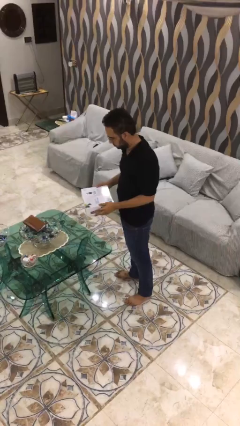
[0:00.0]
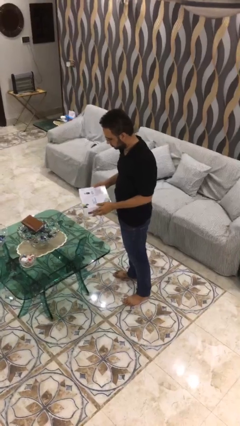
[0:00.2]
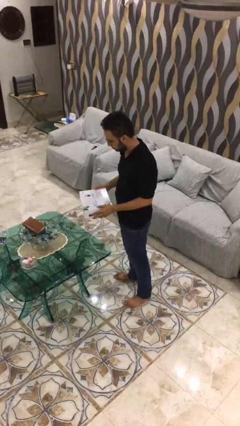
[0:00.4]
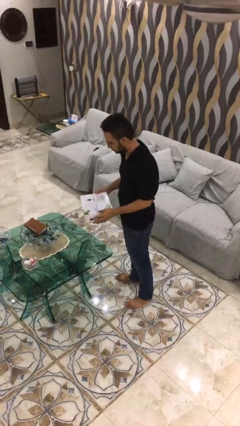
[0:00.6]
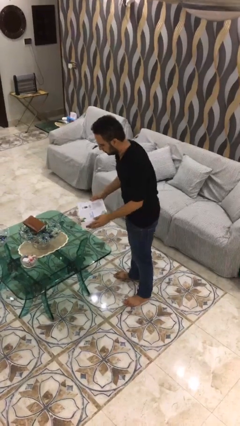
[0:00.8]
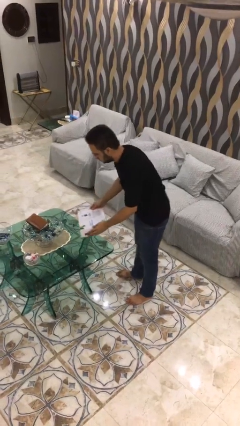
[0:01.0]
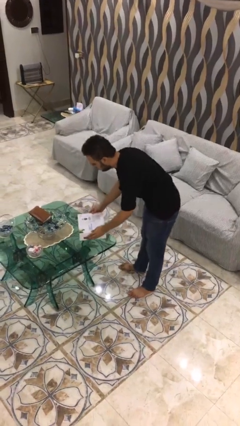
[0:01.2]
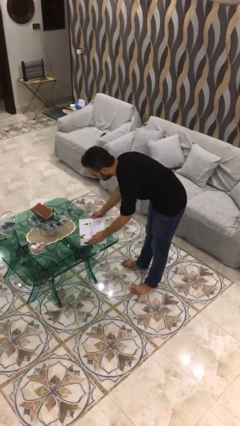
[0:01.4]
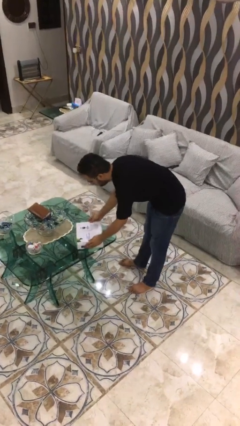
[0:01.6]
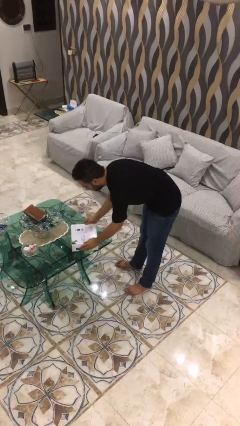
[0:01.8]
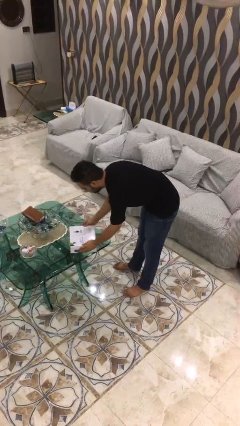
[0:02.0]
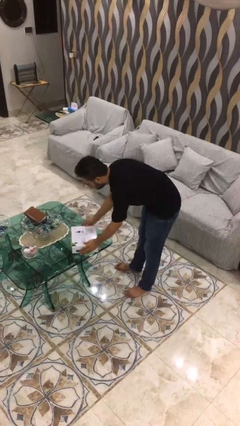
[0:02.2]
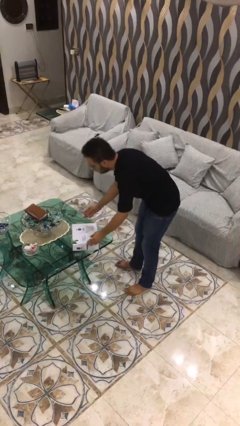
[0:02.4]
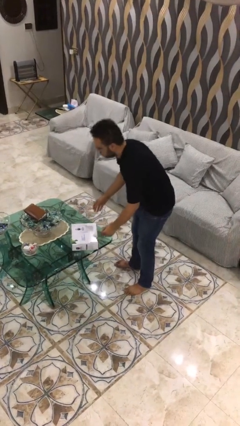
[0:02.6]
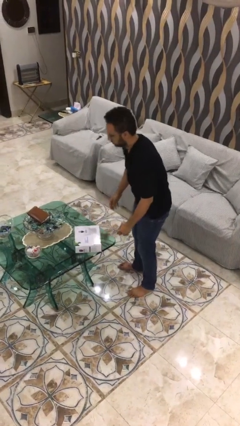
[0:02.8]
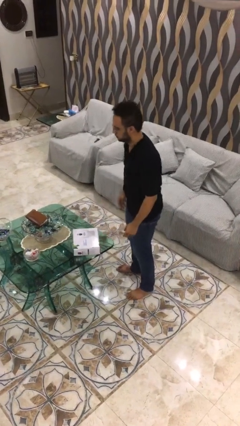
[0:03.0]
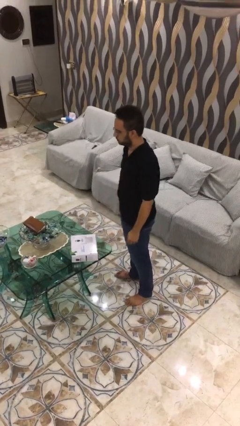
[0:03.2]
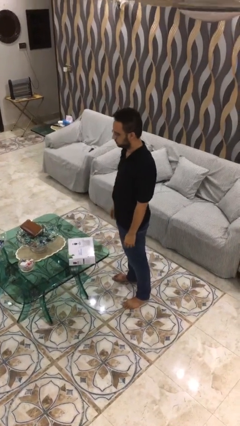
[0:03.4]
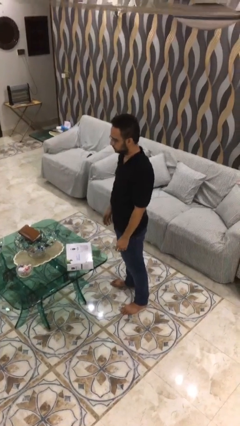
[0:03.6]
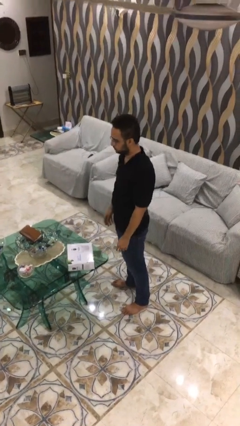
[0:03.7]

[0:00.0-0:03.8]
person puts down object on table

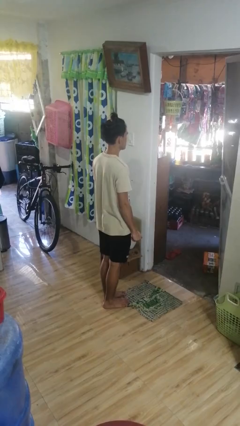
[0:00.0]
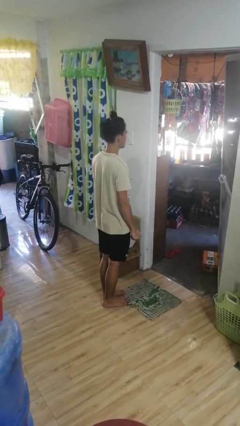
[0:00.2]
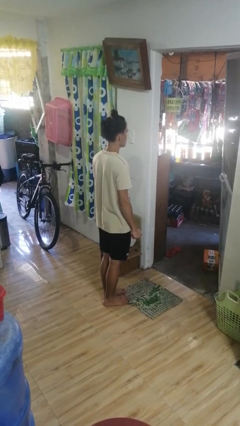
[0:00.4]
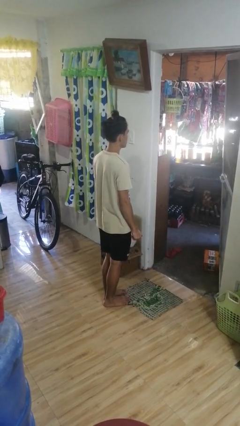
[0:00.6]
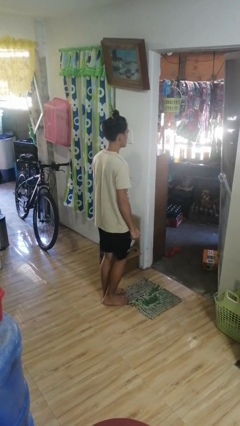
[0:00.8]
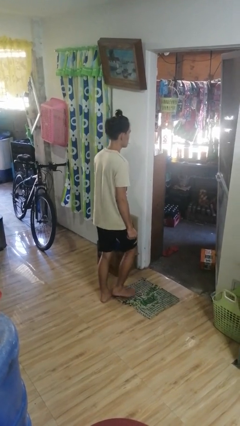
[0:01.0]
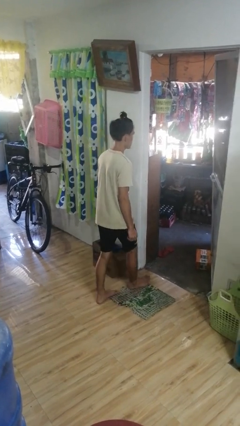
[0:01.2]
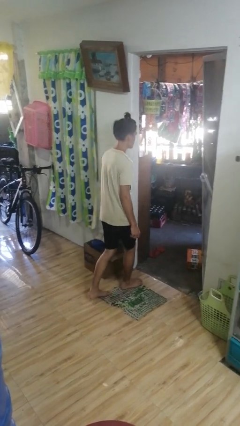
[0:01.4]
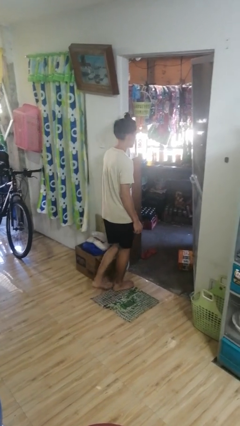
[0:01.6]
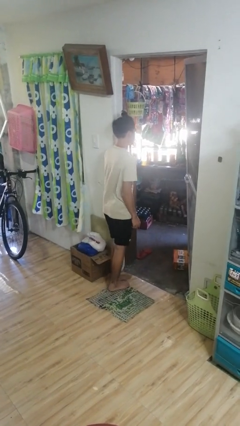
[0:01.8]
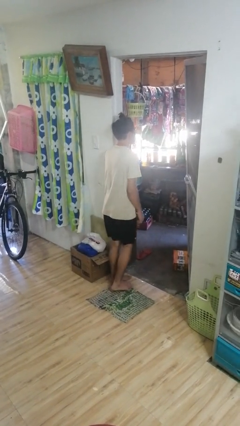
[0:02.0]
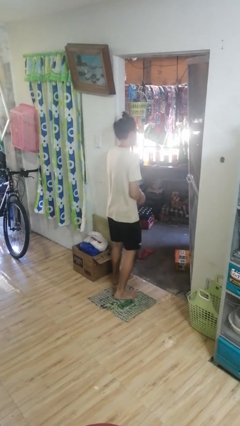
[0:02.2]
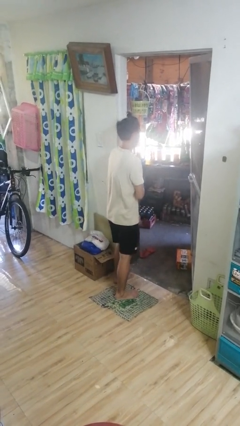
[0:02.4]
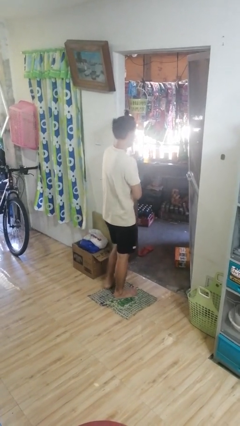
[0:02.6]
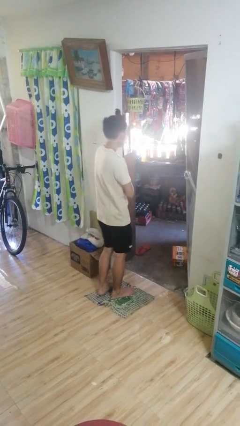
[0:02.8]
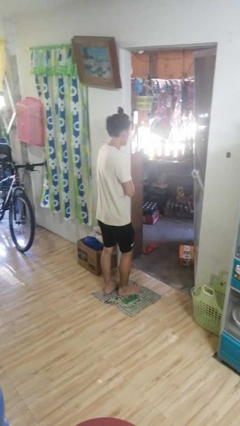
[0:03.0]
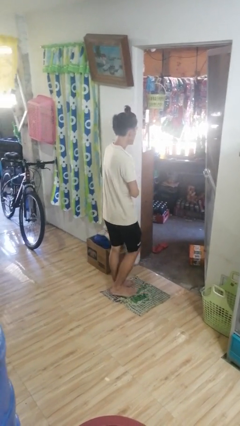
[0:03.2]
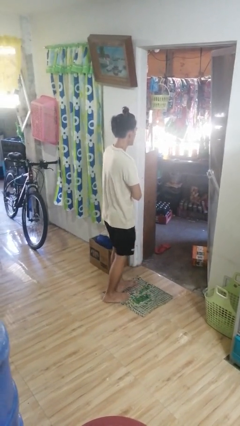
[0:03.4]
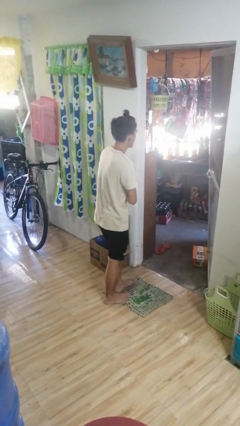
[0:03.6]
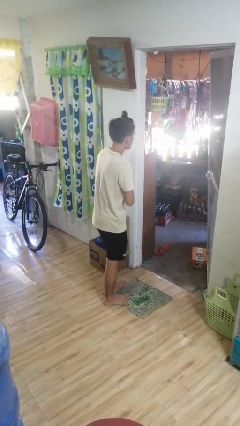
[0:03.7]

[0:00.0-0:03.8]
person bumps into wall

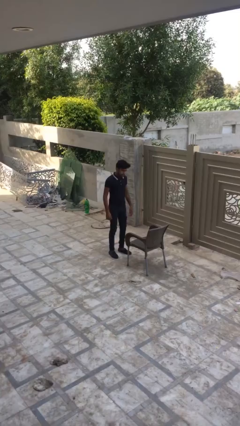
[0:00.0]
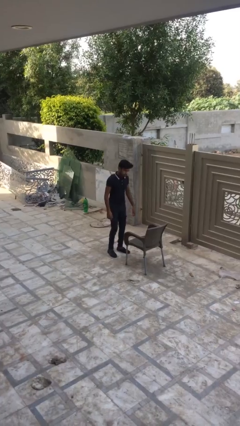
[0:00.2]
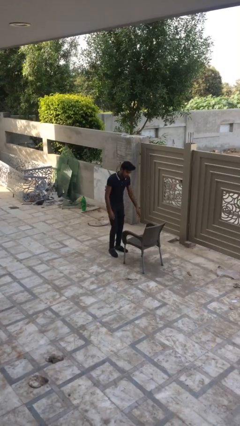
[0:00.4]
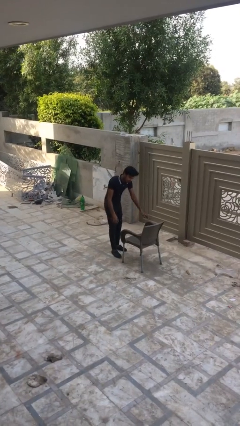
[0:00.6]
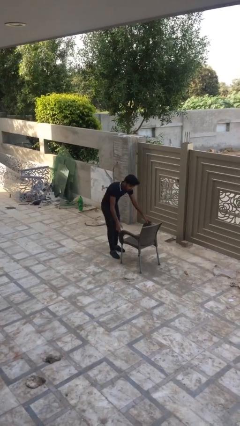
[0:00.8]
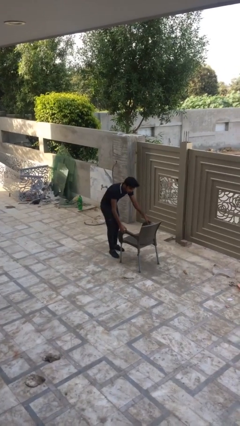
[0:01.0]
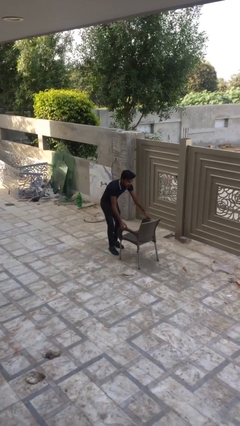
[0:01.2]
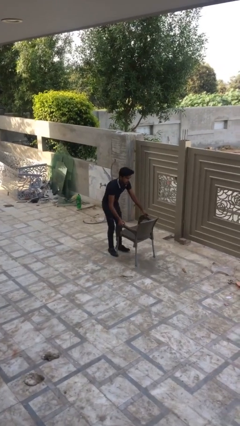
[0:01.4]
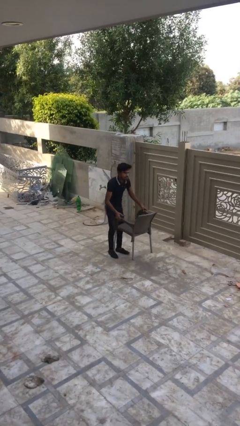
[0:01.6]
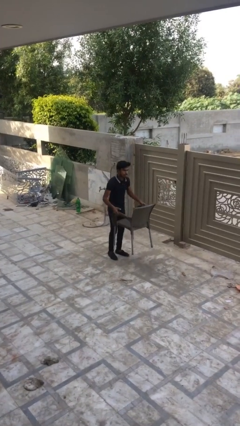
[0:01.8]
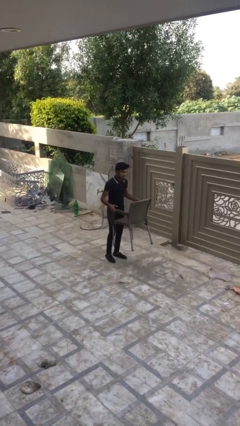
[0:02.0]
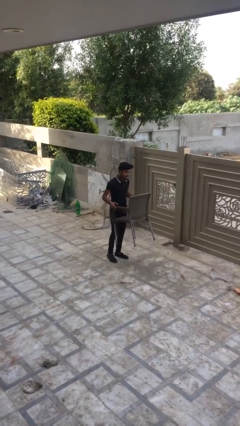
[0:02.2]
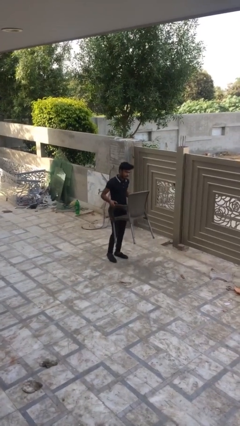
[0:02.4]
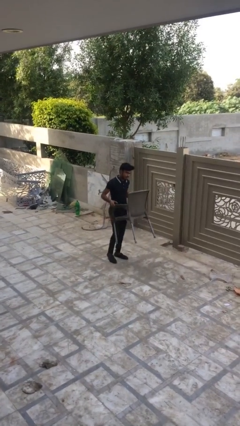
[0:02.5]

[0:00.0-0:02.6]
person picks up object from floor

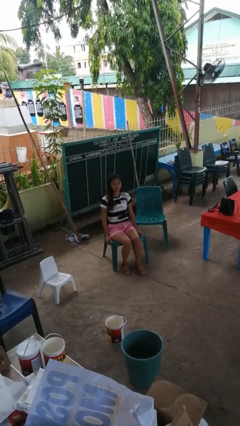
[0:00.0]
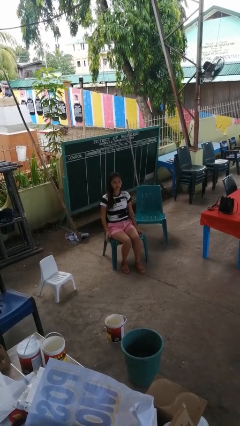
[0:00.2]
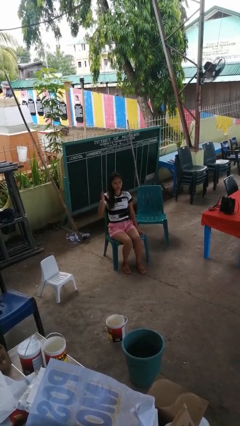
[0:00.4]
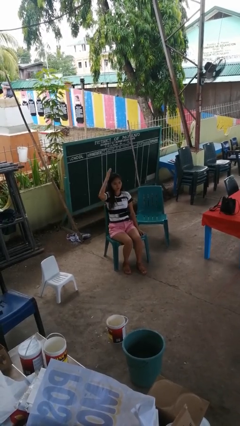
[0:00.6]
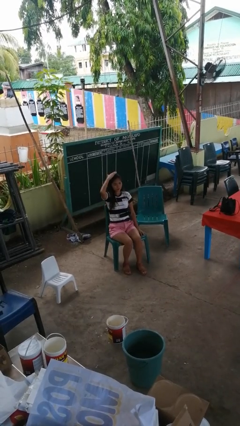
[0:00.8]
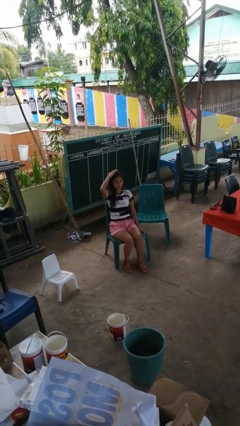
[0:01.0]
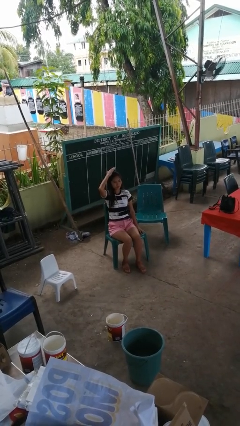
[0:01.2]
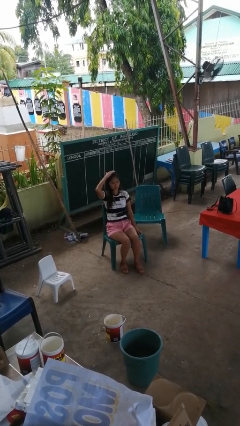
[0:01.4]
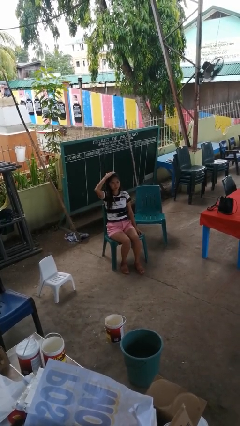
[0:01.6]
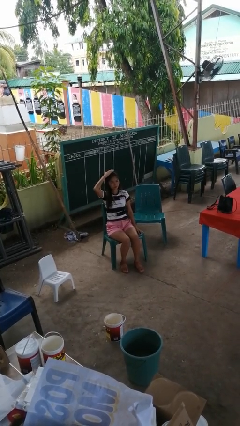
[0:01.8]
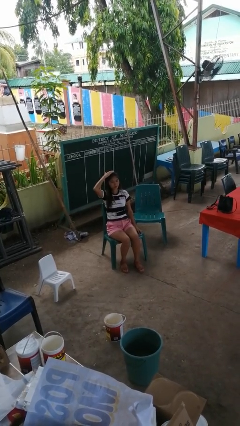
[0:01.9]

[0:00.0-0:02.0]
person pats head

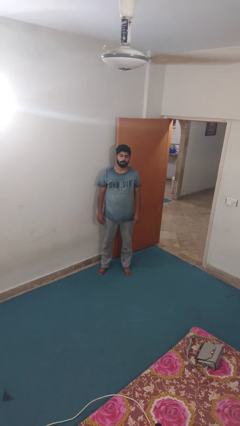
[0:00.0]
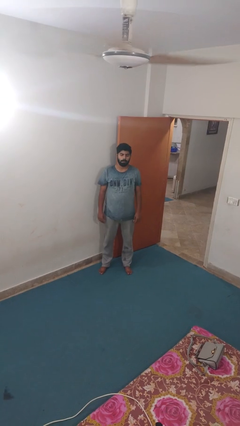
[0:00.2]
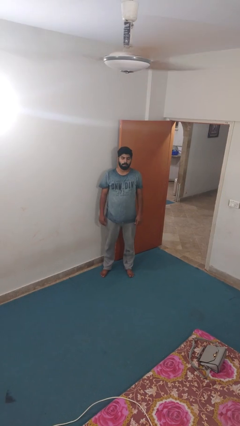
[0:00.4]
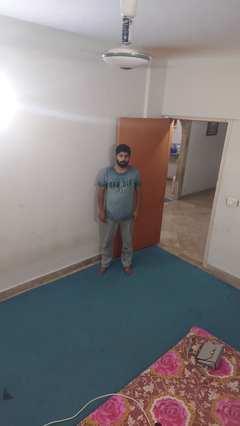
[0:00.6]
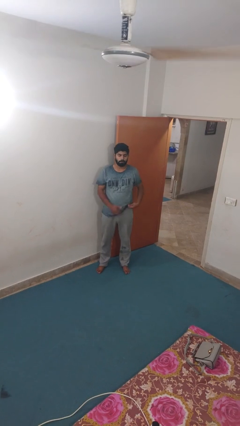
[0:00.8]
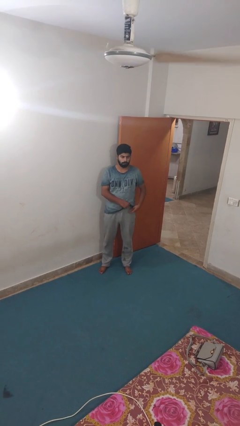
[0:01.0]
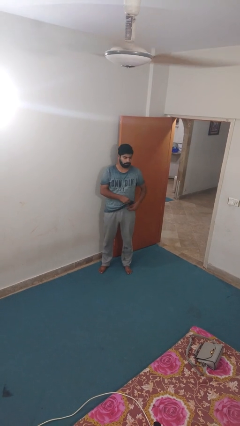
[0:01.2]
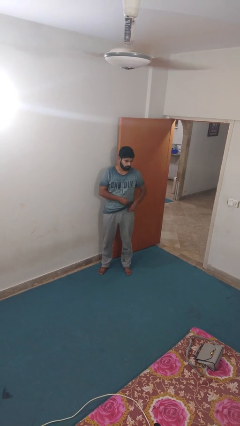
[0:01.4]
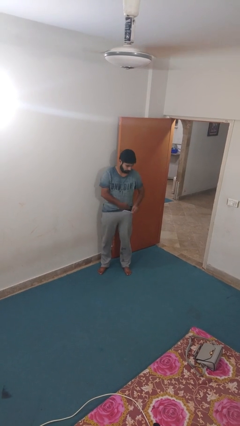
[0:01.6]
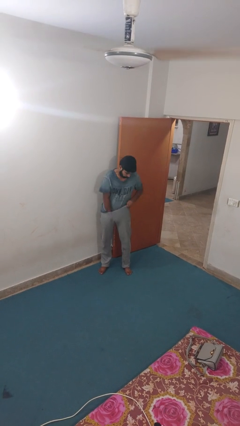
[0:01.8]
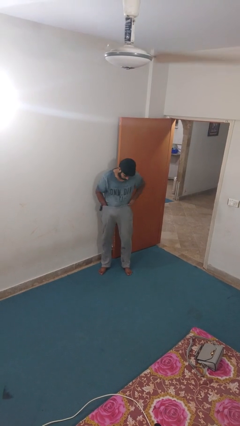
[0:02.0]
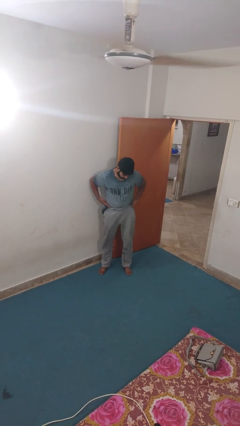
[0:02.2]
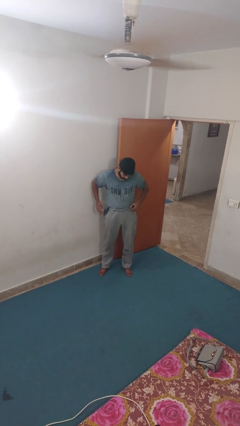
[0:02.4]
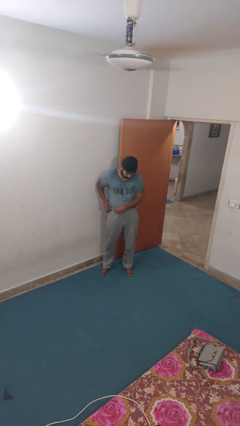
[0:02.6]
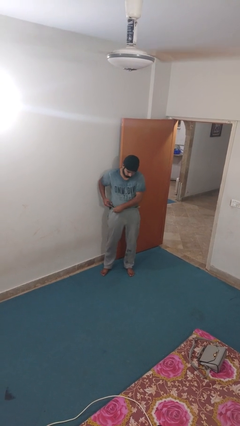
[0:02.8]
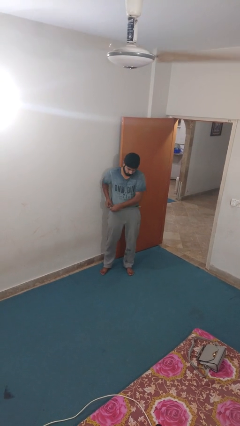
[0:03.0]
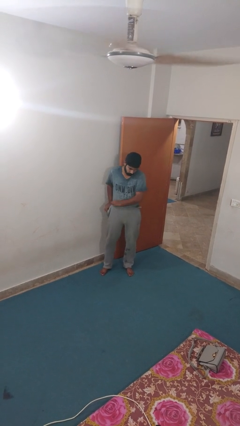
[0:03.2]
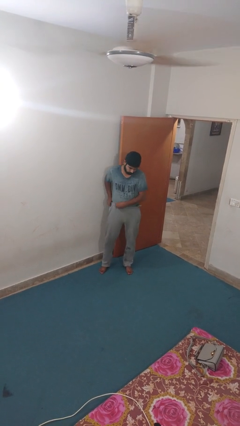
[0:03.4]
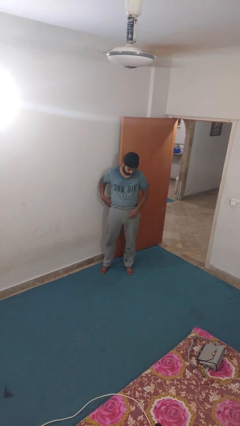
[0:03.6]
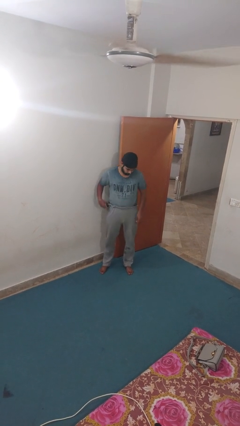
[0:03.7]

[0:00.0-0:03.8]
person tucks in shirt

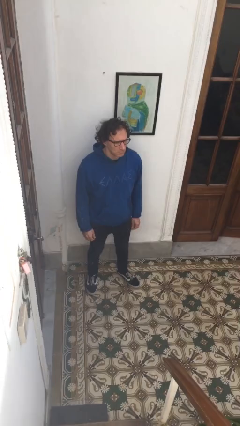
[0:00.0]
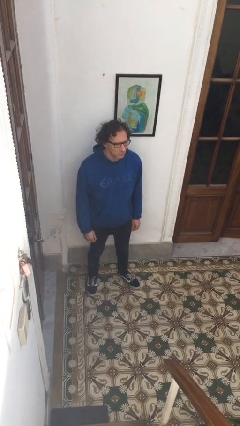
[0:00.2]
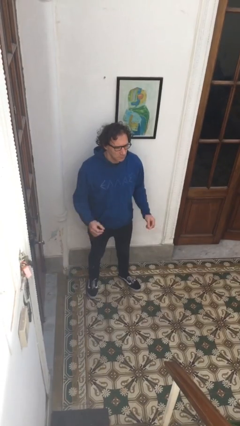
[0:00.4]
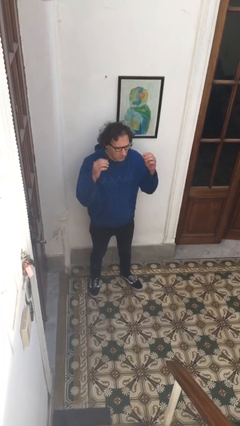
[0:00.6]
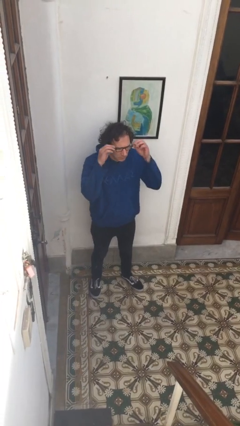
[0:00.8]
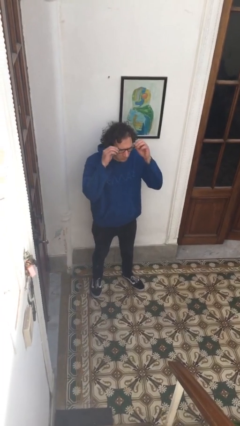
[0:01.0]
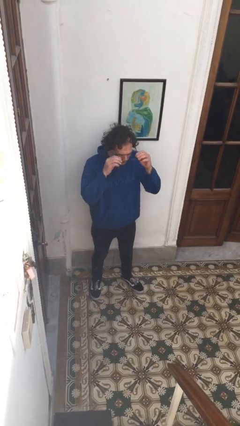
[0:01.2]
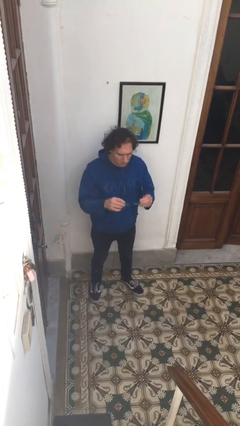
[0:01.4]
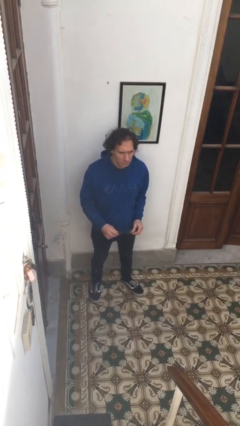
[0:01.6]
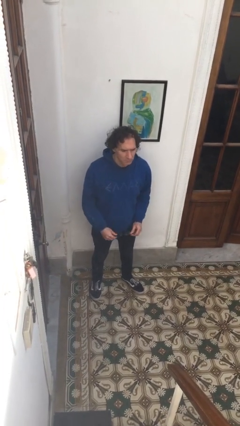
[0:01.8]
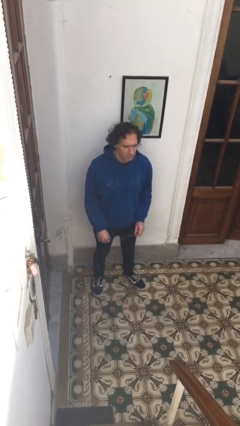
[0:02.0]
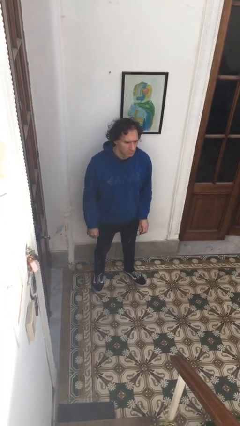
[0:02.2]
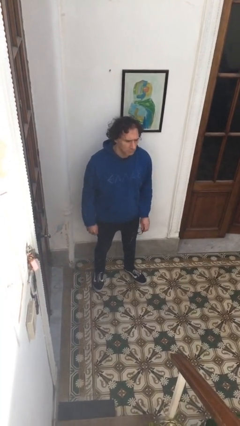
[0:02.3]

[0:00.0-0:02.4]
person takes off glasses
